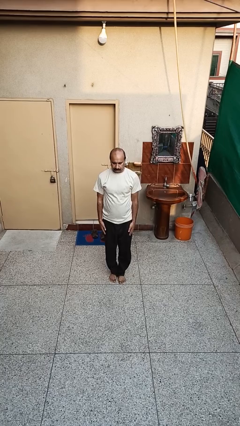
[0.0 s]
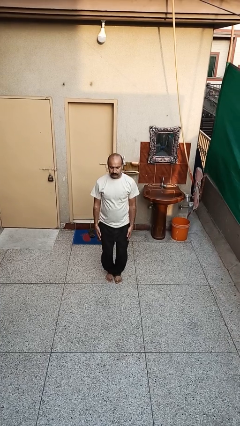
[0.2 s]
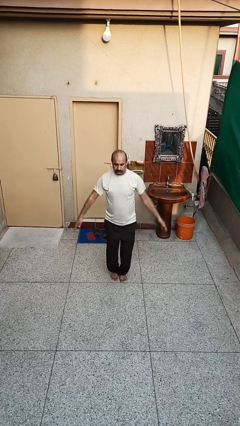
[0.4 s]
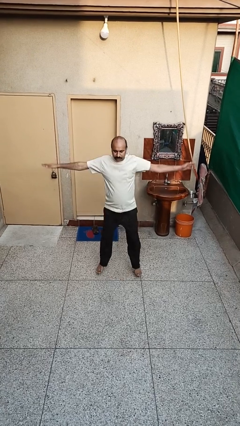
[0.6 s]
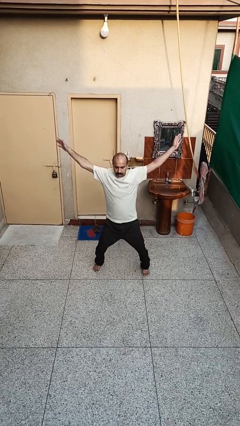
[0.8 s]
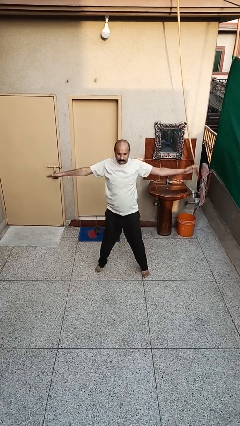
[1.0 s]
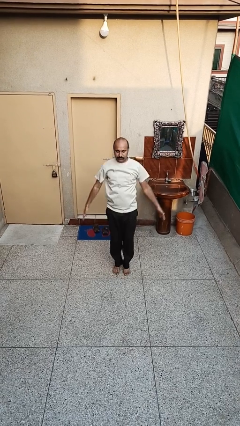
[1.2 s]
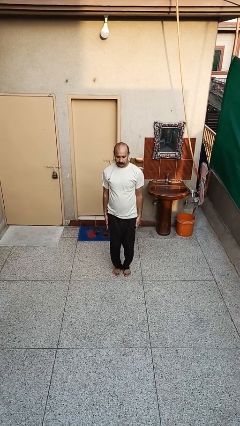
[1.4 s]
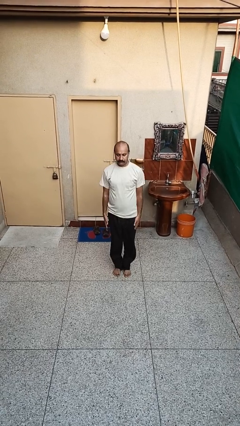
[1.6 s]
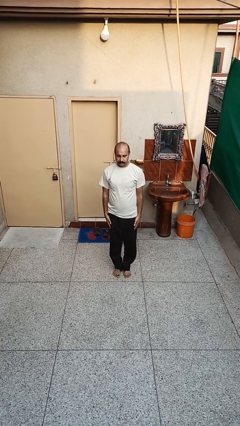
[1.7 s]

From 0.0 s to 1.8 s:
person exercises with jumping jacks

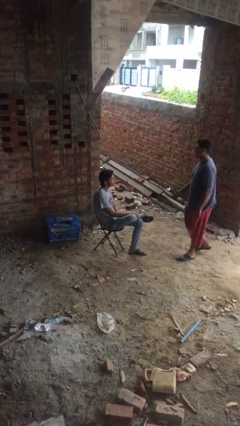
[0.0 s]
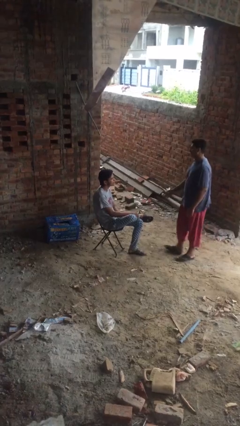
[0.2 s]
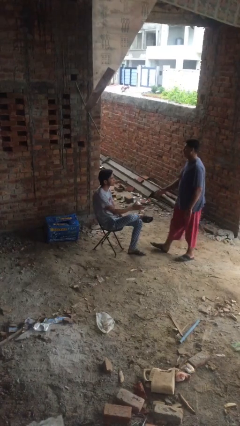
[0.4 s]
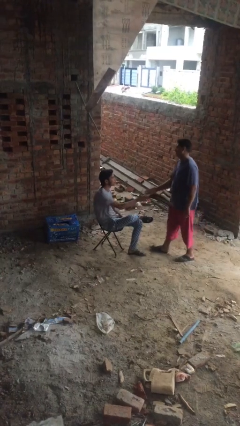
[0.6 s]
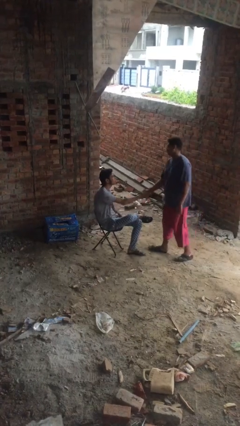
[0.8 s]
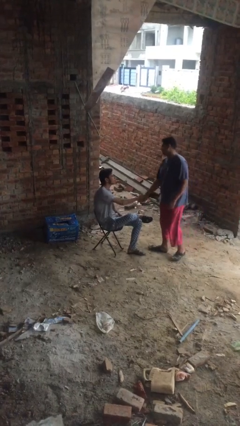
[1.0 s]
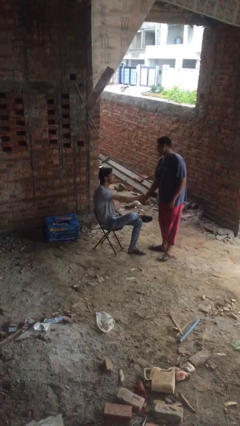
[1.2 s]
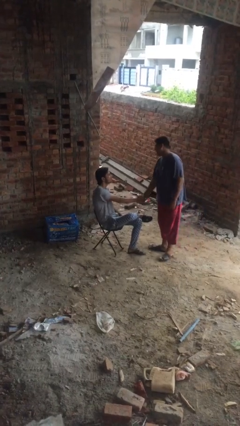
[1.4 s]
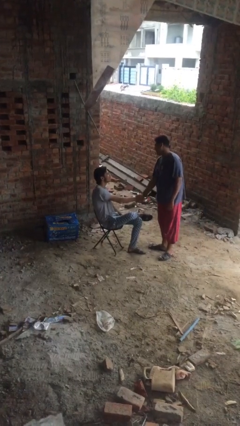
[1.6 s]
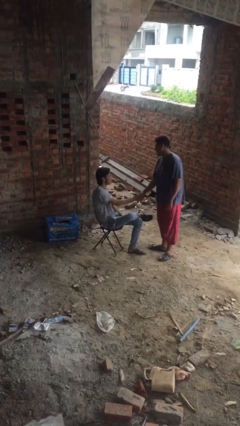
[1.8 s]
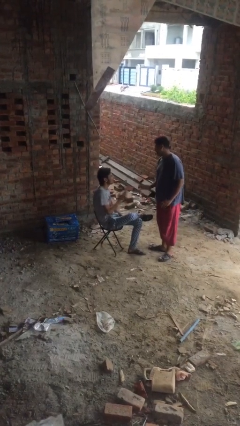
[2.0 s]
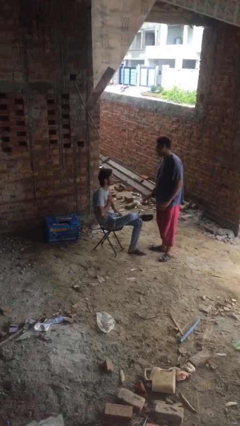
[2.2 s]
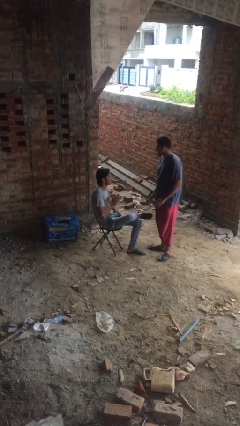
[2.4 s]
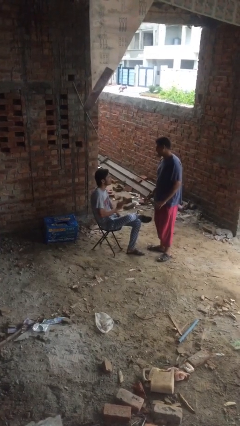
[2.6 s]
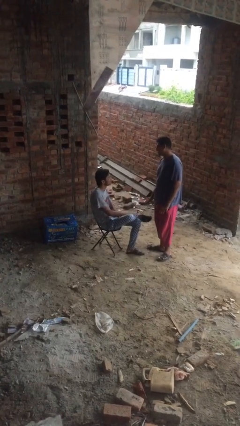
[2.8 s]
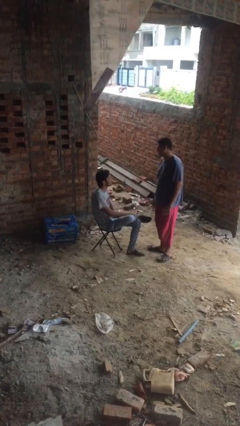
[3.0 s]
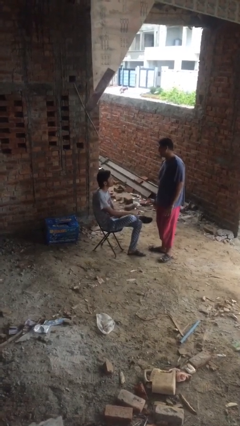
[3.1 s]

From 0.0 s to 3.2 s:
person shakes hand

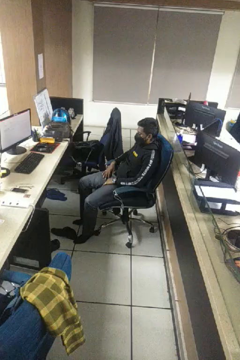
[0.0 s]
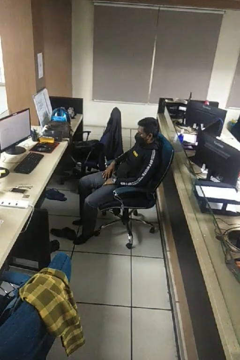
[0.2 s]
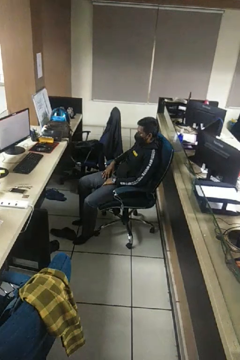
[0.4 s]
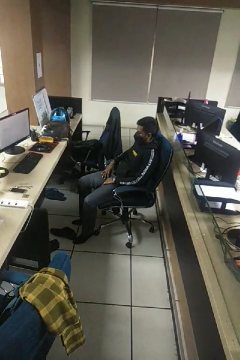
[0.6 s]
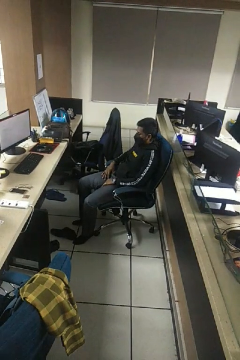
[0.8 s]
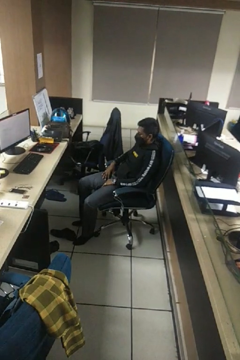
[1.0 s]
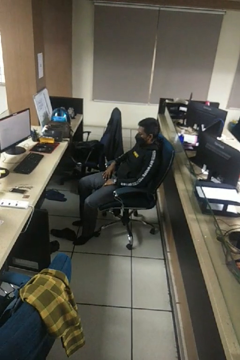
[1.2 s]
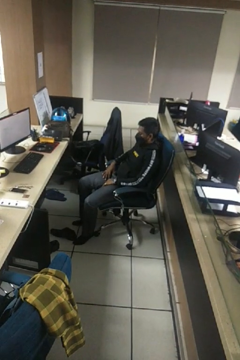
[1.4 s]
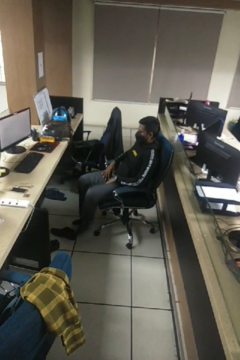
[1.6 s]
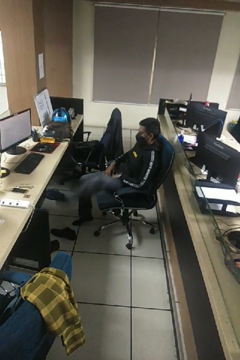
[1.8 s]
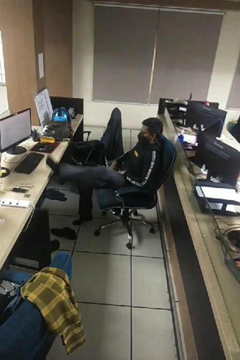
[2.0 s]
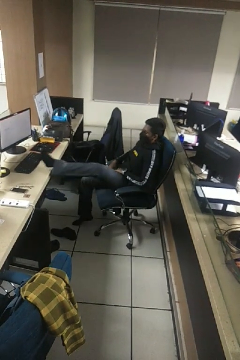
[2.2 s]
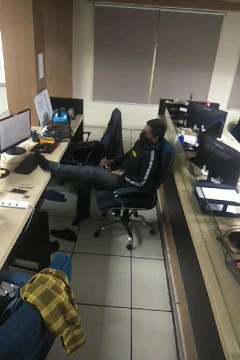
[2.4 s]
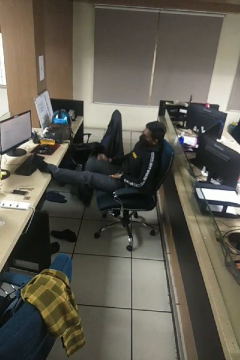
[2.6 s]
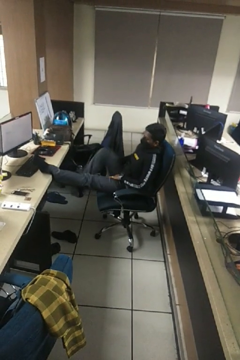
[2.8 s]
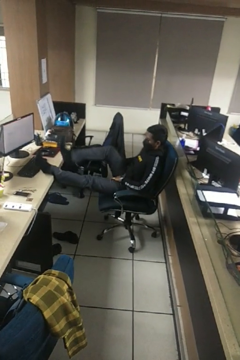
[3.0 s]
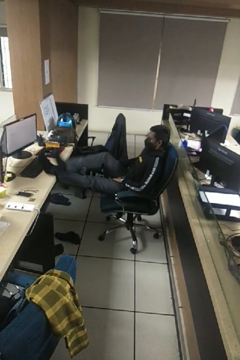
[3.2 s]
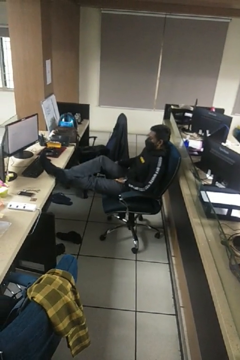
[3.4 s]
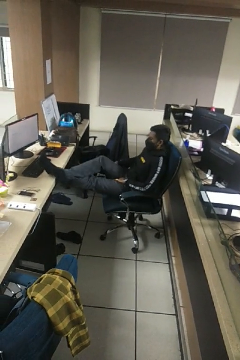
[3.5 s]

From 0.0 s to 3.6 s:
person puts feet up

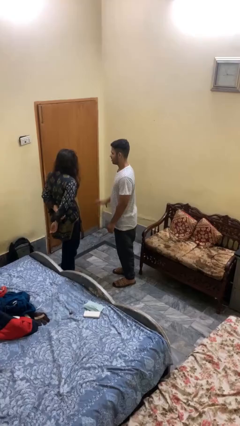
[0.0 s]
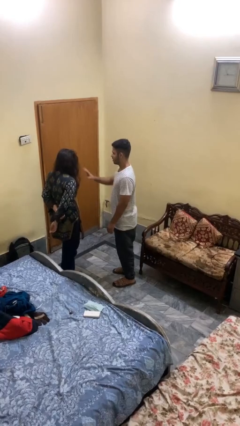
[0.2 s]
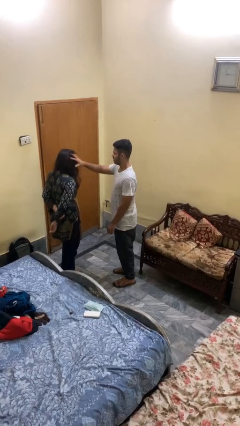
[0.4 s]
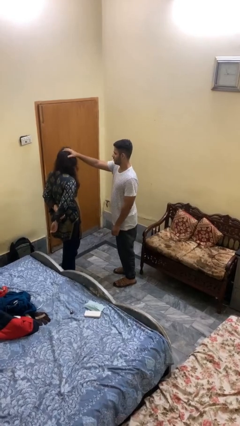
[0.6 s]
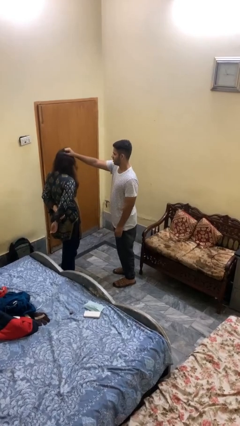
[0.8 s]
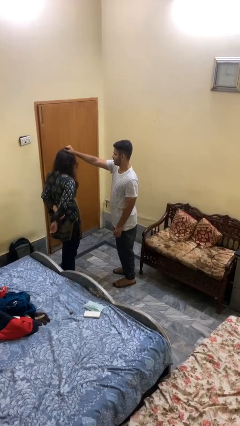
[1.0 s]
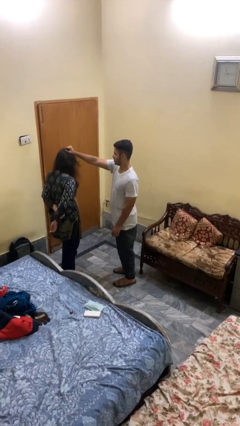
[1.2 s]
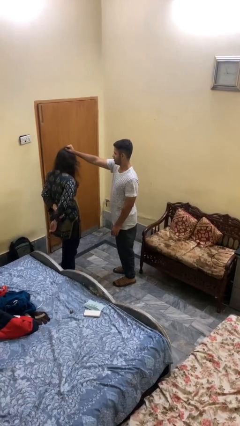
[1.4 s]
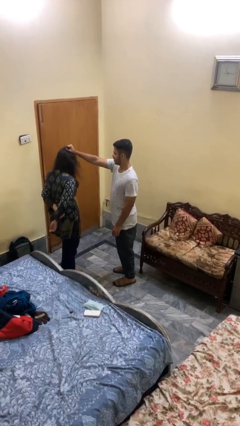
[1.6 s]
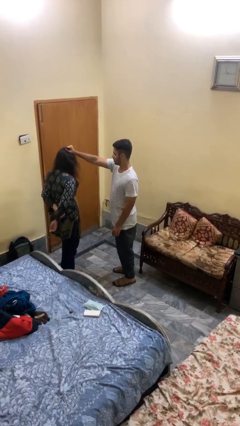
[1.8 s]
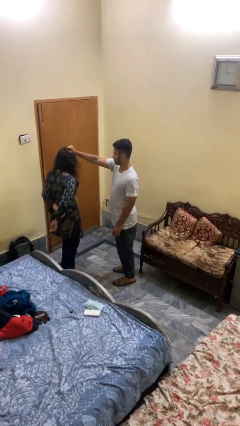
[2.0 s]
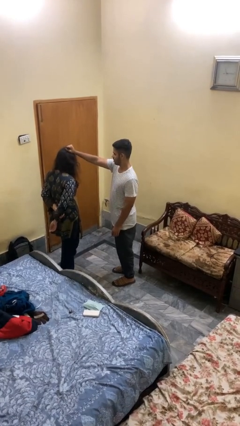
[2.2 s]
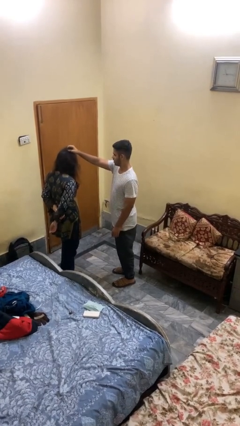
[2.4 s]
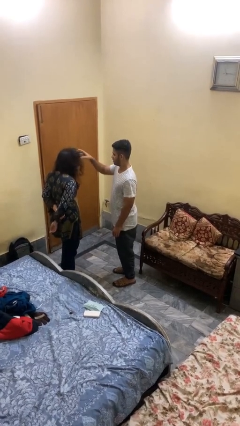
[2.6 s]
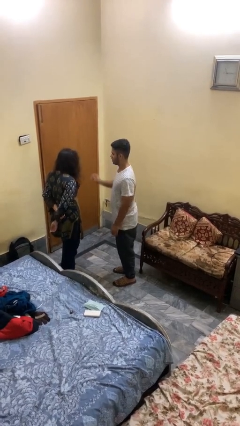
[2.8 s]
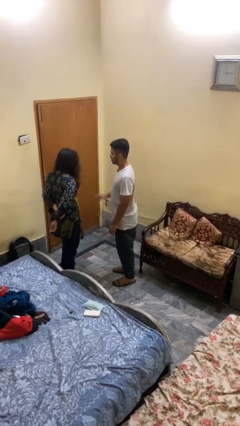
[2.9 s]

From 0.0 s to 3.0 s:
person grabs person by hair

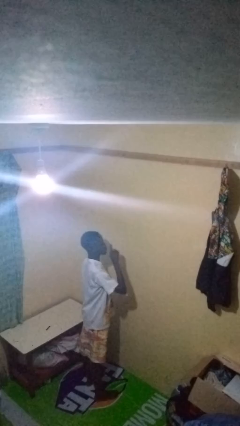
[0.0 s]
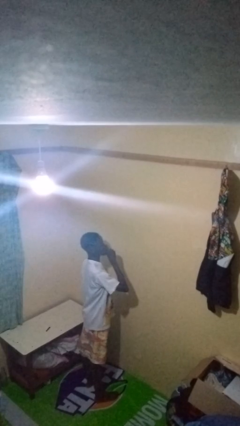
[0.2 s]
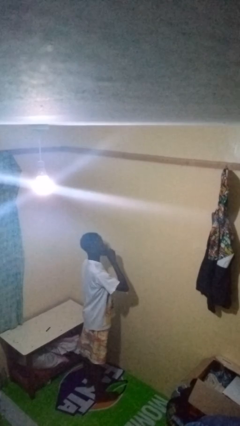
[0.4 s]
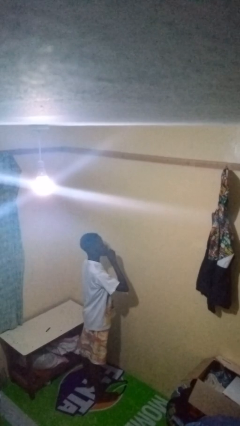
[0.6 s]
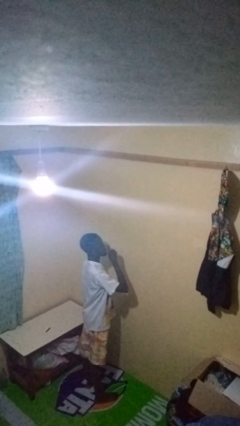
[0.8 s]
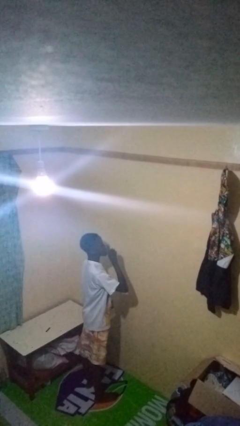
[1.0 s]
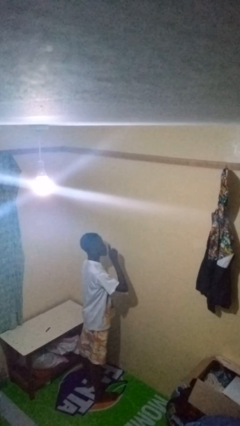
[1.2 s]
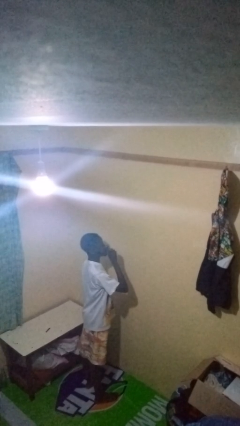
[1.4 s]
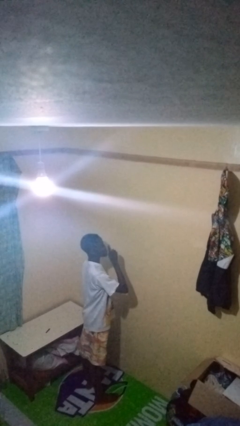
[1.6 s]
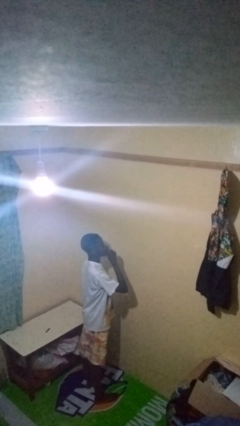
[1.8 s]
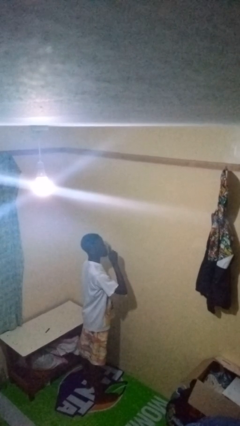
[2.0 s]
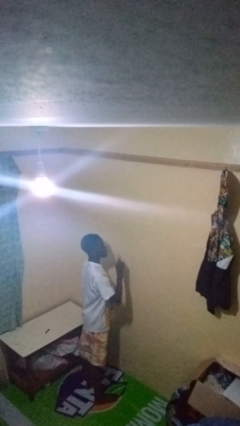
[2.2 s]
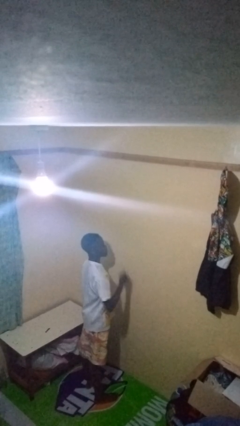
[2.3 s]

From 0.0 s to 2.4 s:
person gestures be quiet

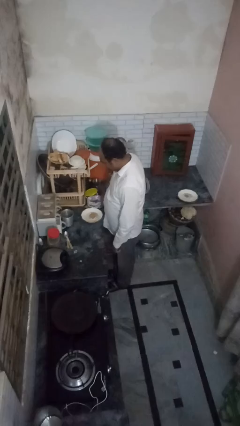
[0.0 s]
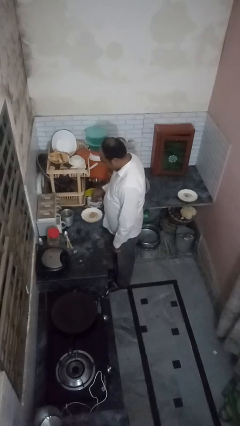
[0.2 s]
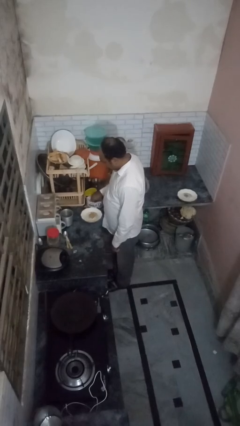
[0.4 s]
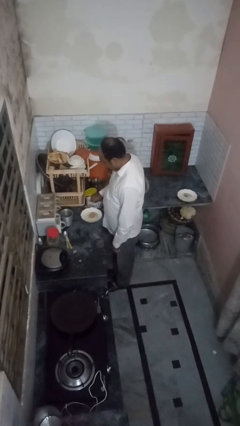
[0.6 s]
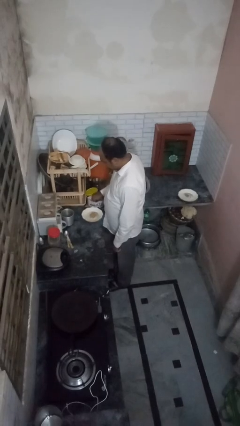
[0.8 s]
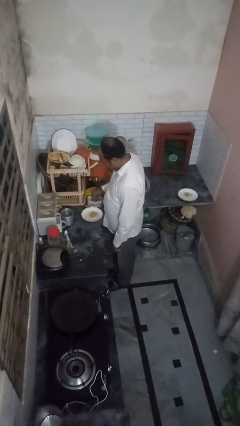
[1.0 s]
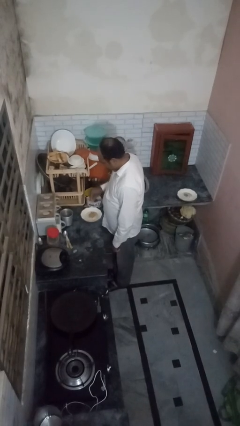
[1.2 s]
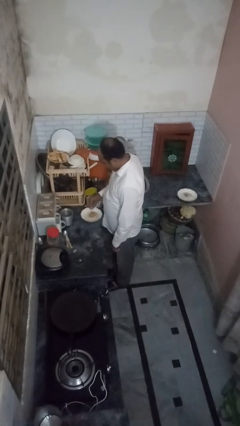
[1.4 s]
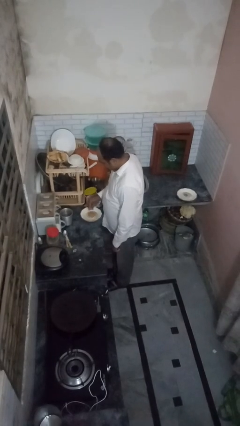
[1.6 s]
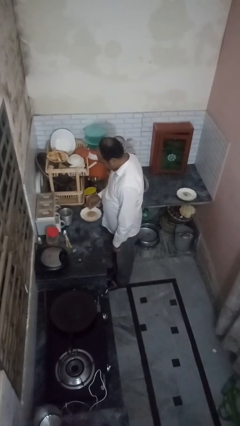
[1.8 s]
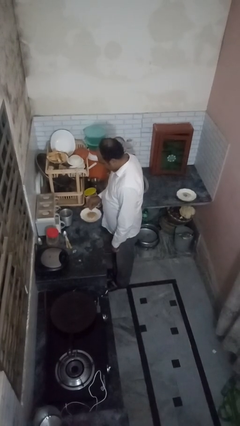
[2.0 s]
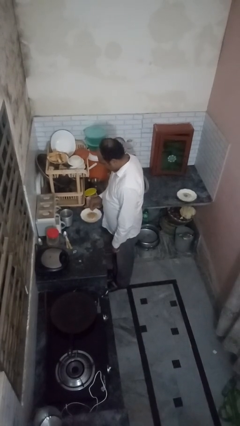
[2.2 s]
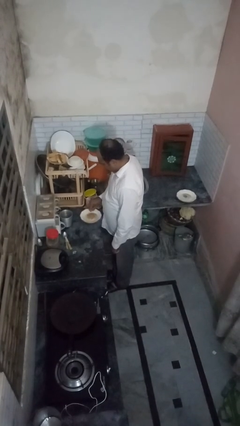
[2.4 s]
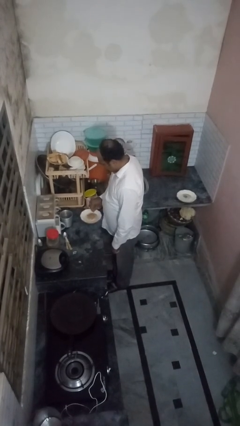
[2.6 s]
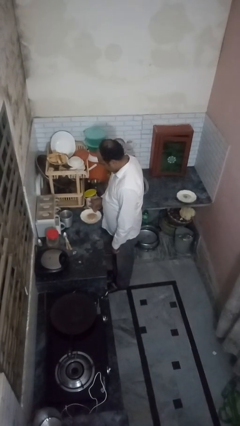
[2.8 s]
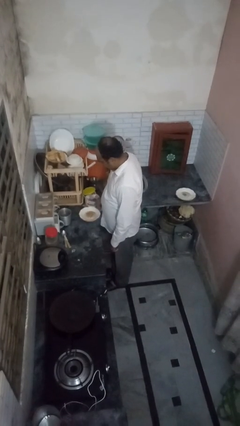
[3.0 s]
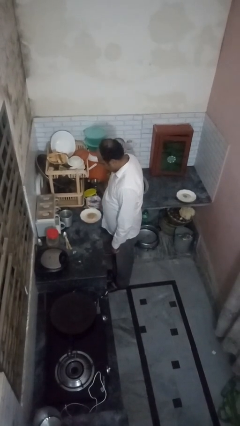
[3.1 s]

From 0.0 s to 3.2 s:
person pours into bowl

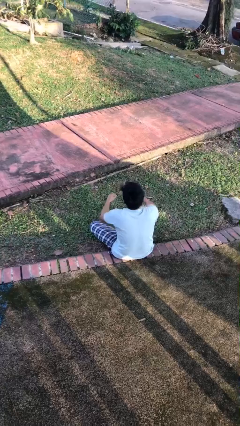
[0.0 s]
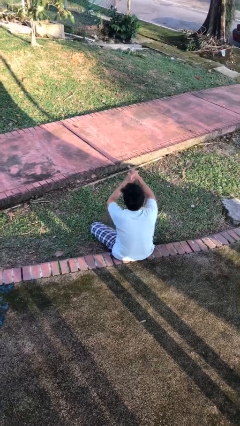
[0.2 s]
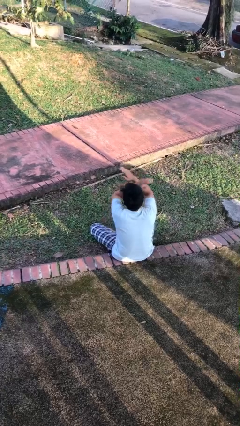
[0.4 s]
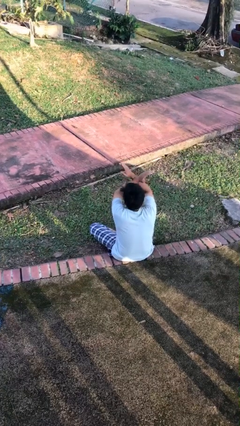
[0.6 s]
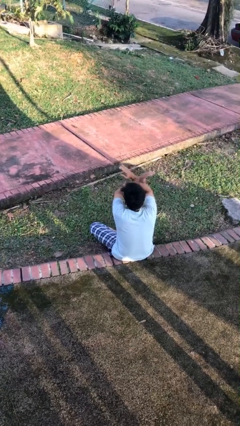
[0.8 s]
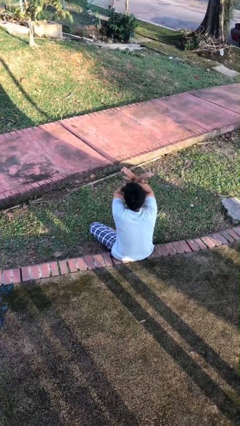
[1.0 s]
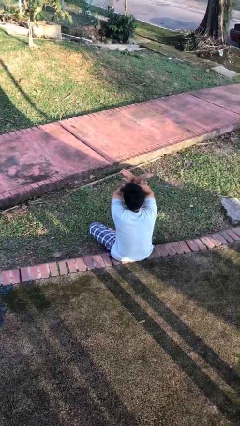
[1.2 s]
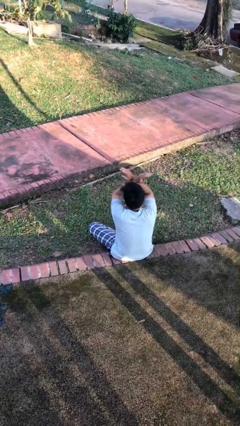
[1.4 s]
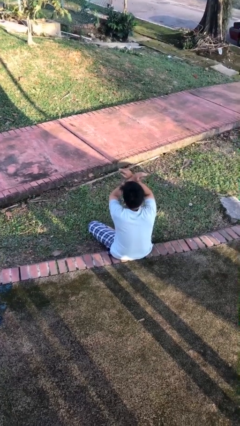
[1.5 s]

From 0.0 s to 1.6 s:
person gestures arms x
